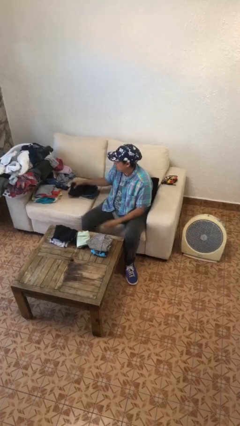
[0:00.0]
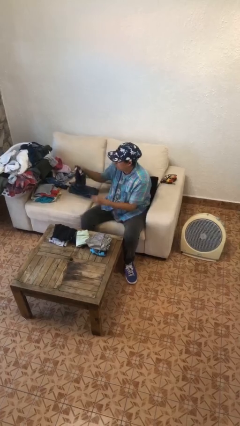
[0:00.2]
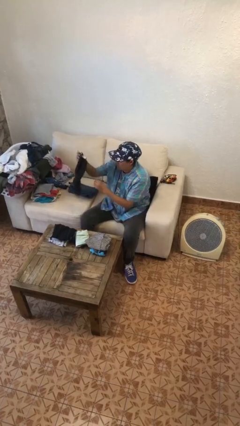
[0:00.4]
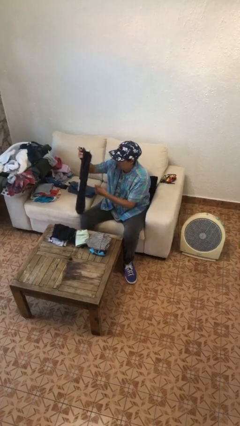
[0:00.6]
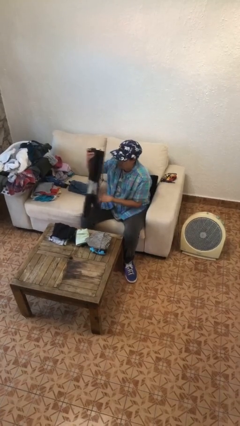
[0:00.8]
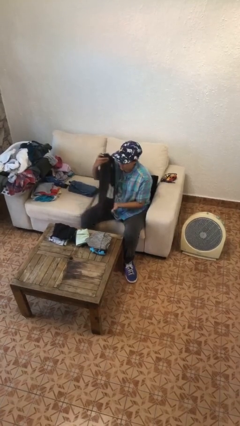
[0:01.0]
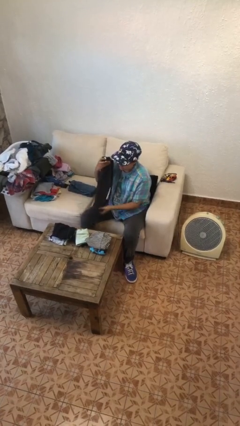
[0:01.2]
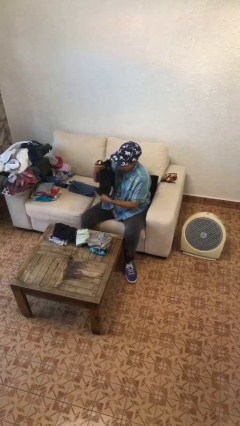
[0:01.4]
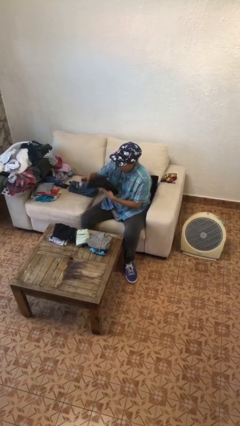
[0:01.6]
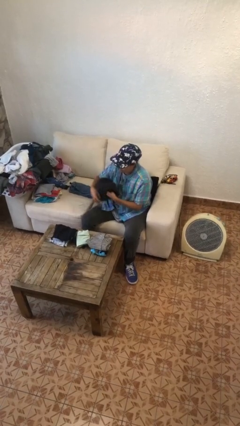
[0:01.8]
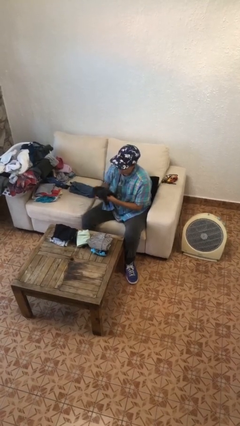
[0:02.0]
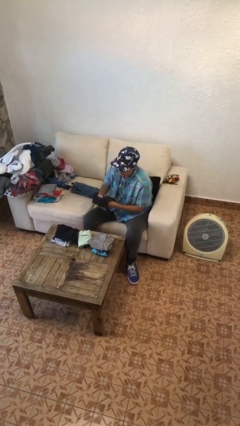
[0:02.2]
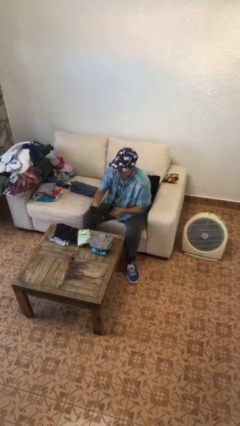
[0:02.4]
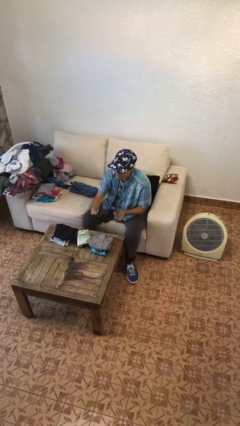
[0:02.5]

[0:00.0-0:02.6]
person folds pants

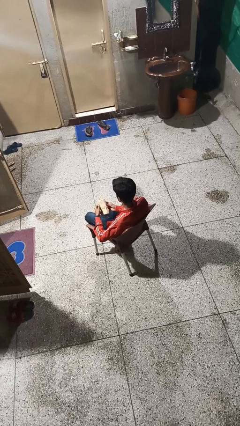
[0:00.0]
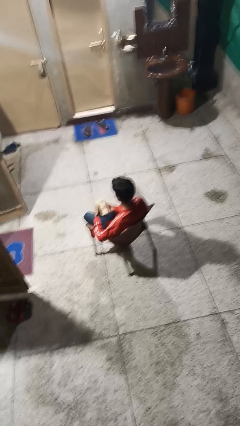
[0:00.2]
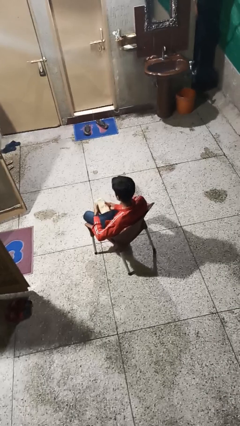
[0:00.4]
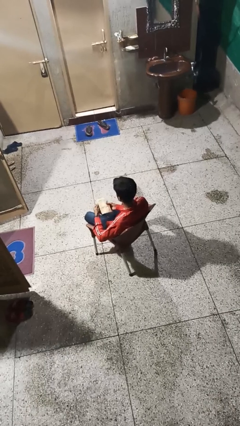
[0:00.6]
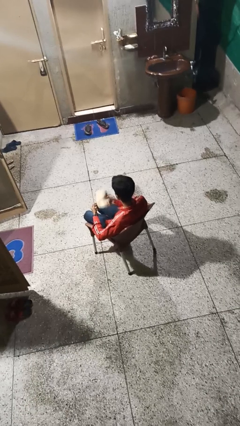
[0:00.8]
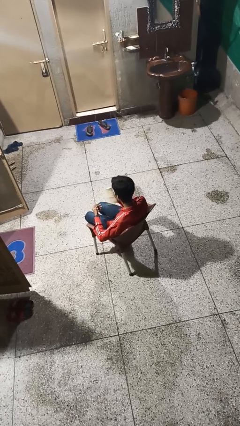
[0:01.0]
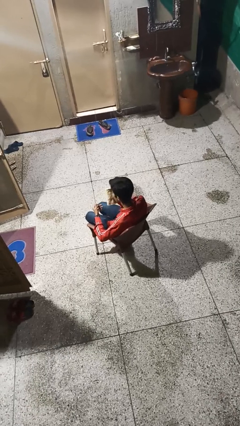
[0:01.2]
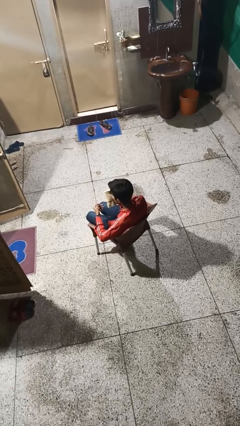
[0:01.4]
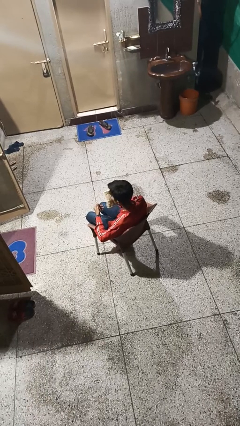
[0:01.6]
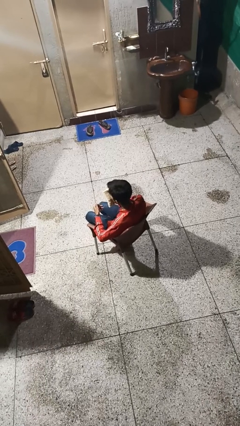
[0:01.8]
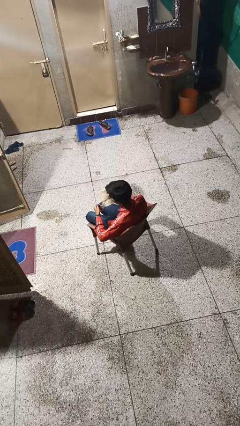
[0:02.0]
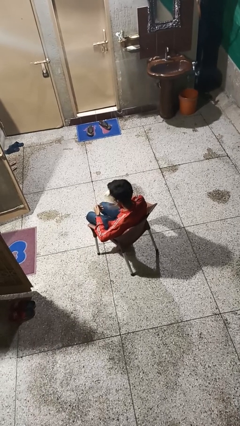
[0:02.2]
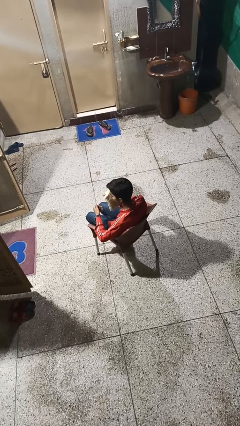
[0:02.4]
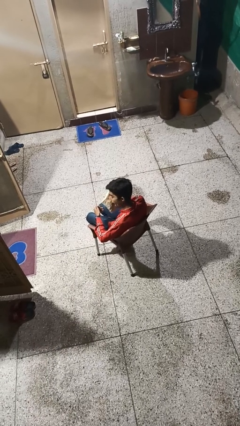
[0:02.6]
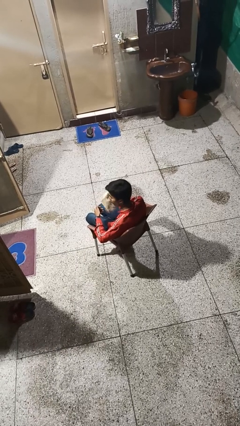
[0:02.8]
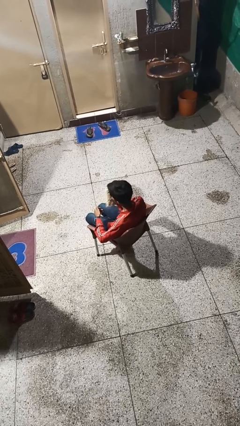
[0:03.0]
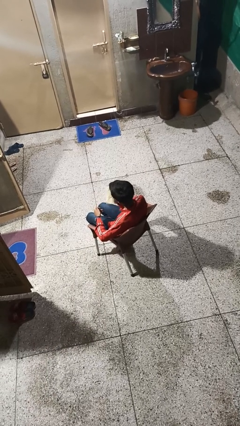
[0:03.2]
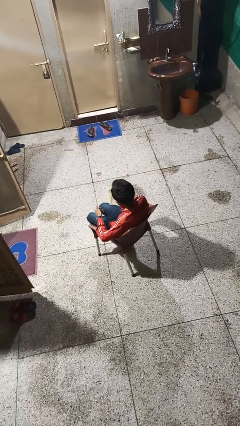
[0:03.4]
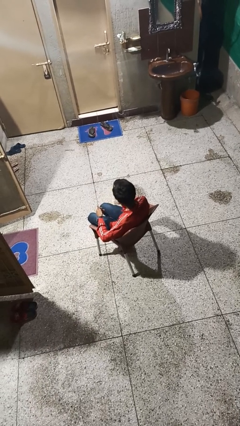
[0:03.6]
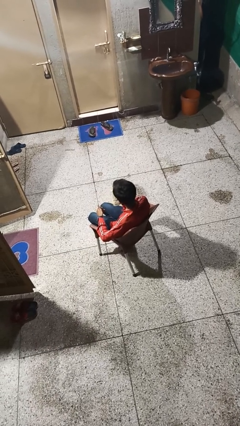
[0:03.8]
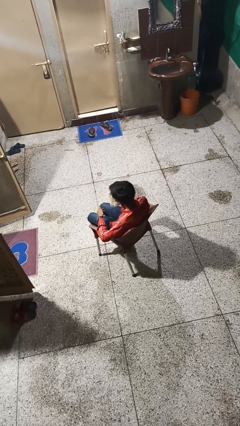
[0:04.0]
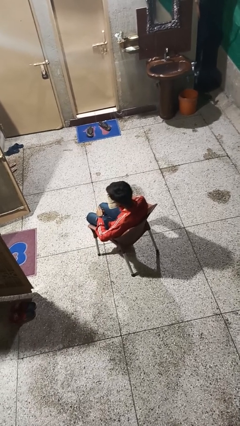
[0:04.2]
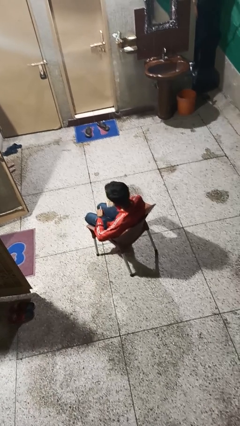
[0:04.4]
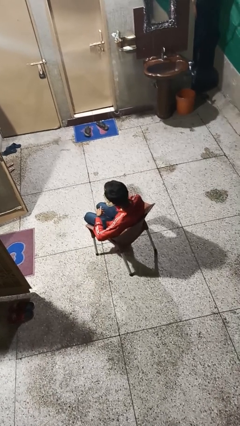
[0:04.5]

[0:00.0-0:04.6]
person blows nose

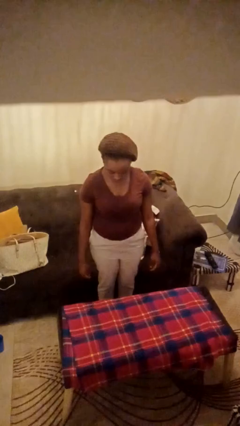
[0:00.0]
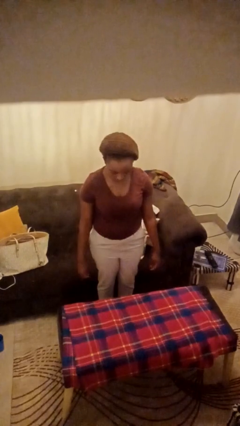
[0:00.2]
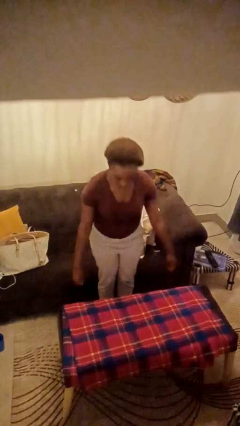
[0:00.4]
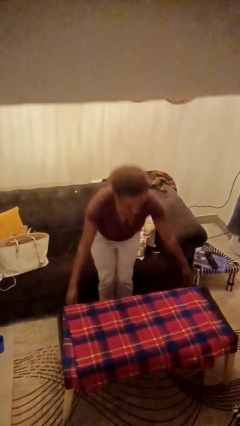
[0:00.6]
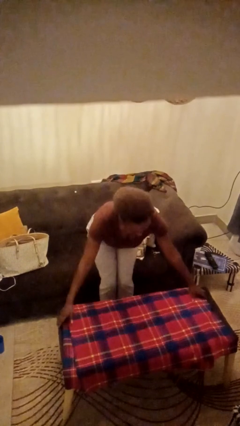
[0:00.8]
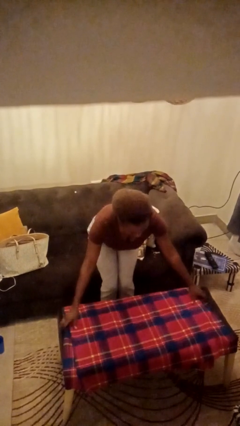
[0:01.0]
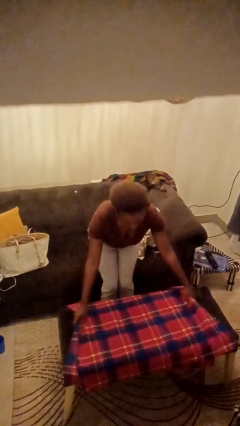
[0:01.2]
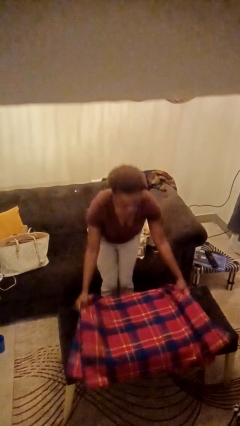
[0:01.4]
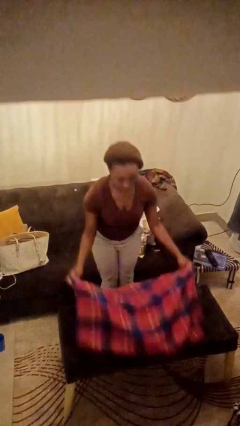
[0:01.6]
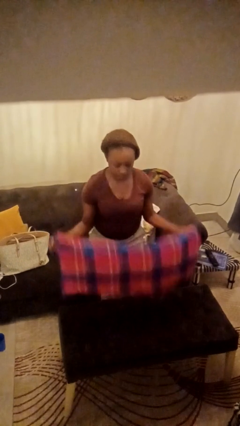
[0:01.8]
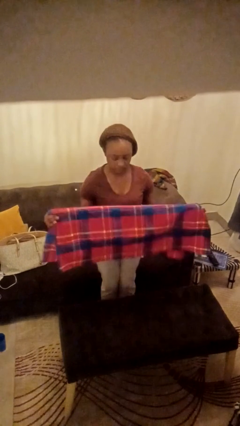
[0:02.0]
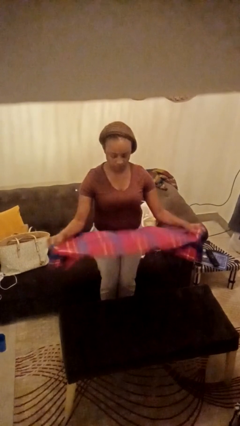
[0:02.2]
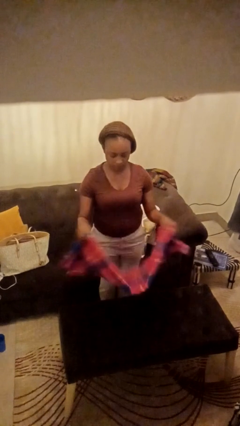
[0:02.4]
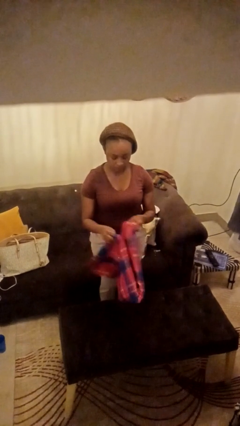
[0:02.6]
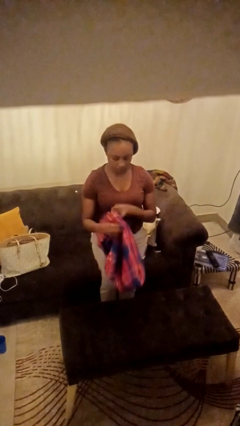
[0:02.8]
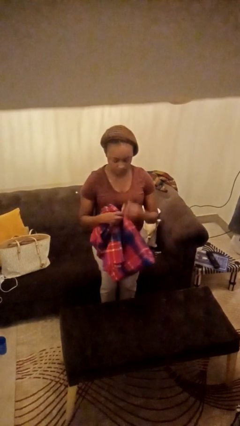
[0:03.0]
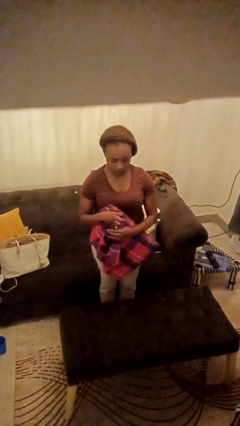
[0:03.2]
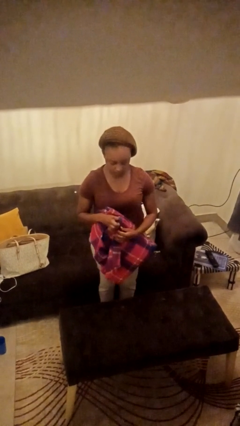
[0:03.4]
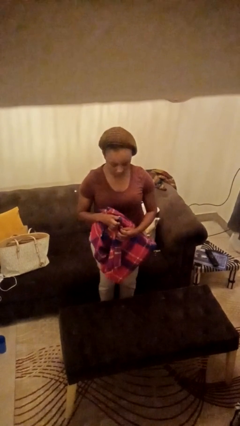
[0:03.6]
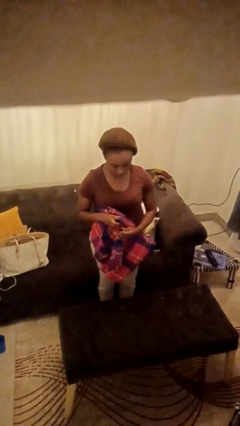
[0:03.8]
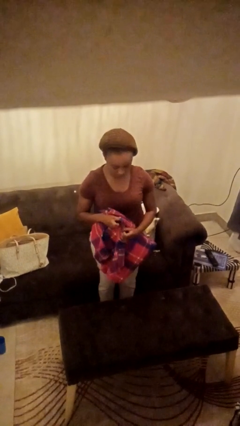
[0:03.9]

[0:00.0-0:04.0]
person folds tablecloth

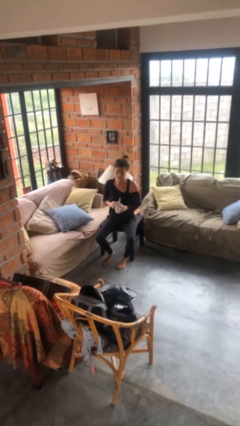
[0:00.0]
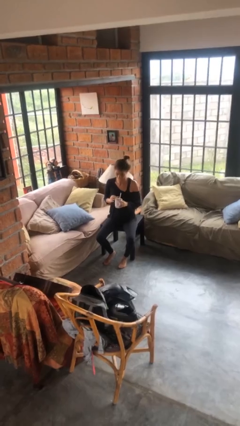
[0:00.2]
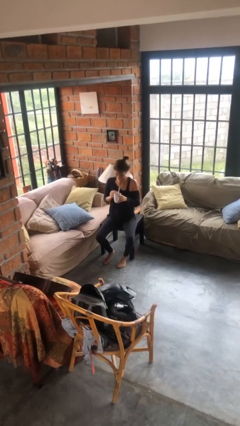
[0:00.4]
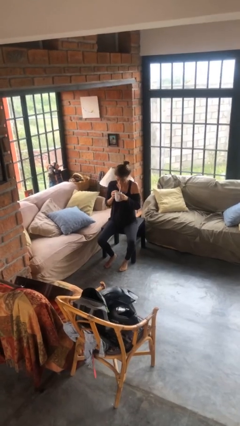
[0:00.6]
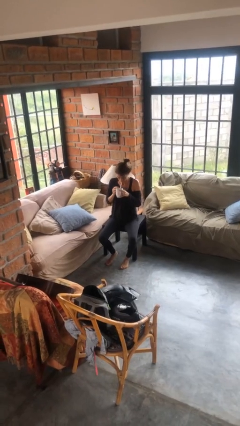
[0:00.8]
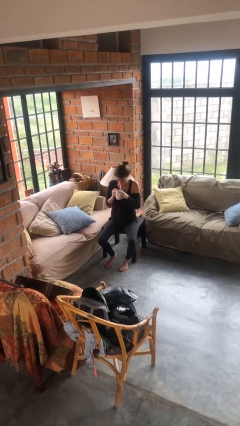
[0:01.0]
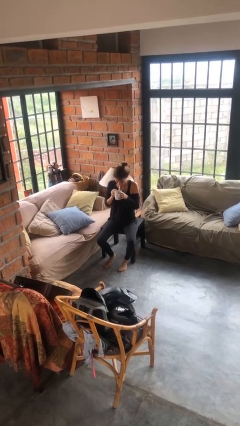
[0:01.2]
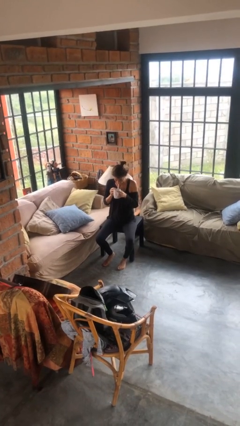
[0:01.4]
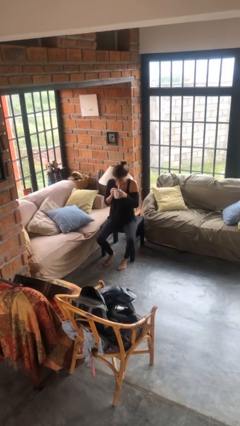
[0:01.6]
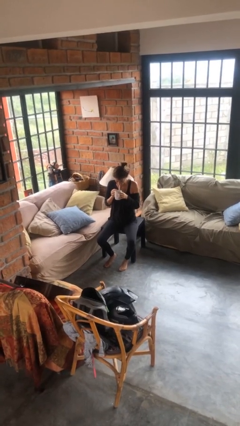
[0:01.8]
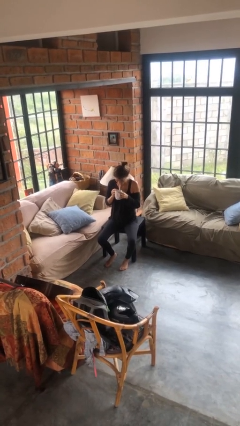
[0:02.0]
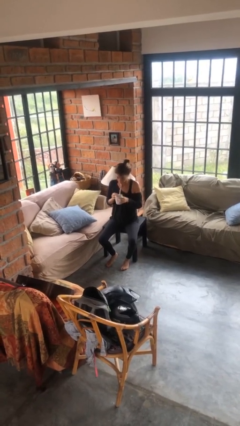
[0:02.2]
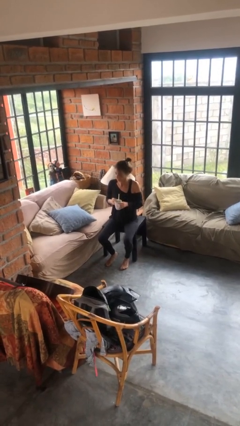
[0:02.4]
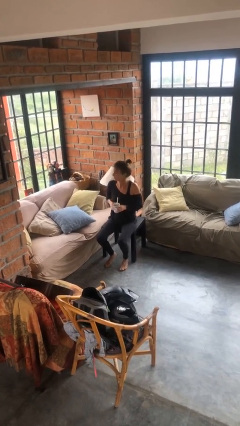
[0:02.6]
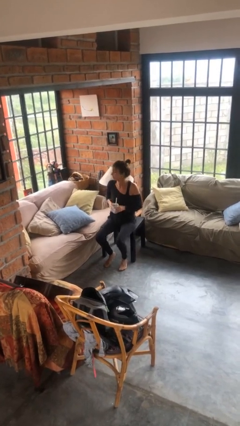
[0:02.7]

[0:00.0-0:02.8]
person drinks from straw

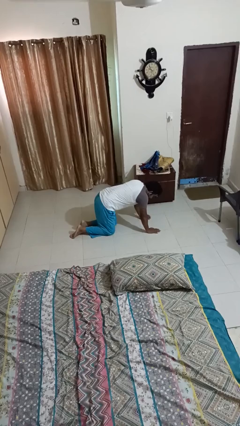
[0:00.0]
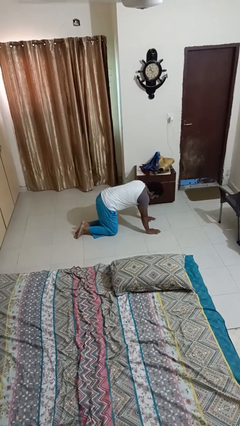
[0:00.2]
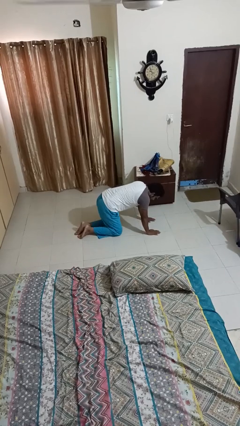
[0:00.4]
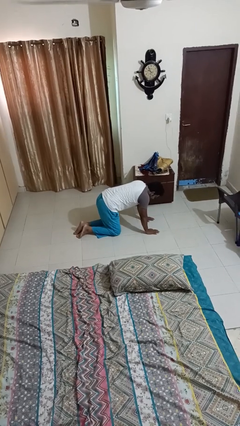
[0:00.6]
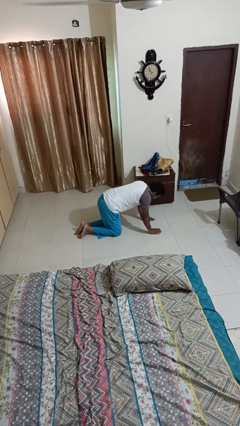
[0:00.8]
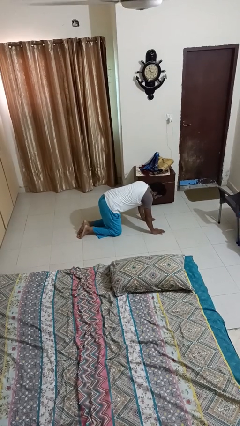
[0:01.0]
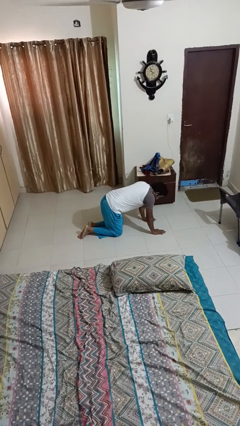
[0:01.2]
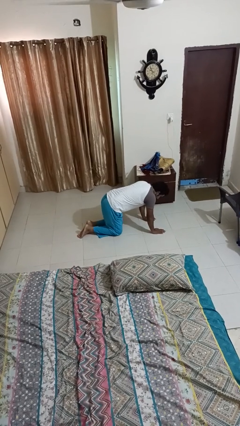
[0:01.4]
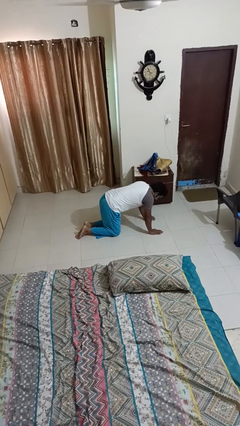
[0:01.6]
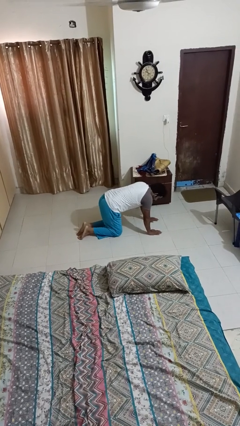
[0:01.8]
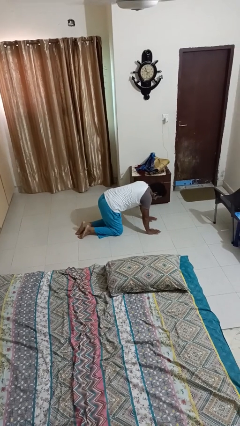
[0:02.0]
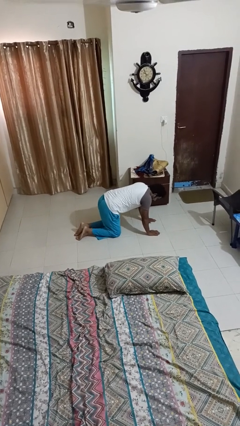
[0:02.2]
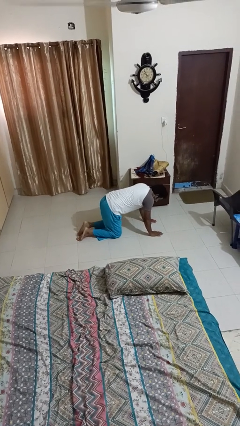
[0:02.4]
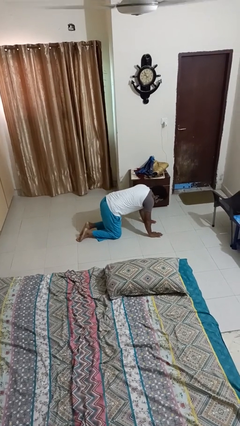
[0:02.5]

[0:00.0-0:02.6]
person crawls

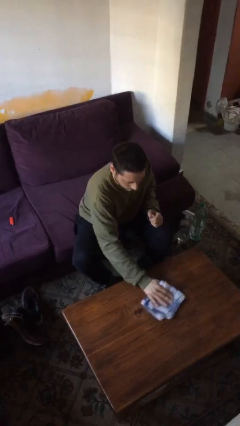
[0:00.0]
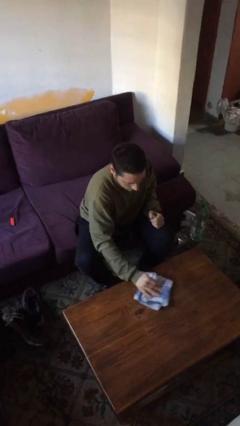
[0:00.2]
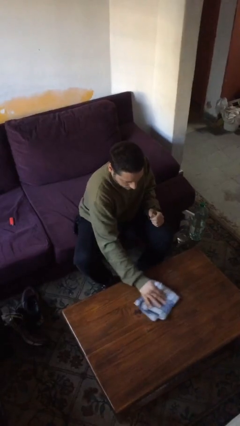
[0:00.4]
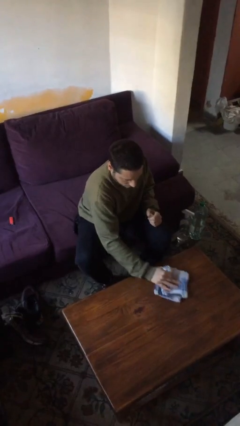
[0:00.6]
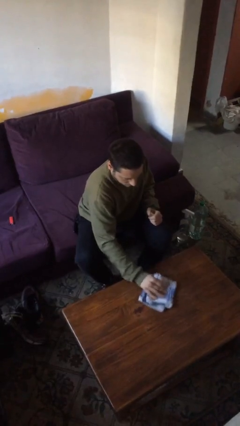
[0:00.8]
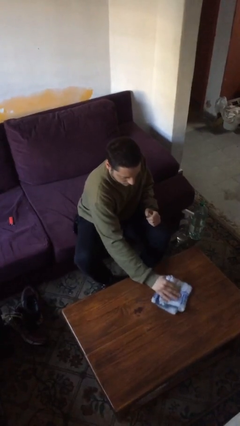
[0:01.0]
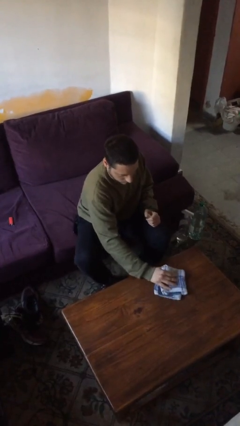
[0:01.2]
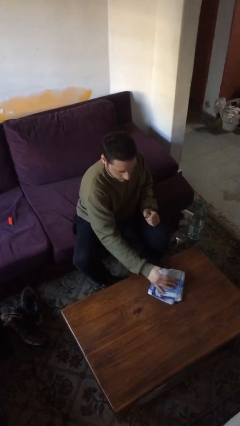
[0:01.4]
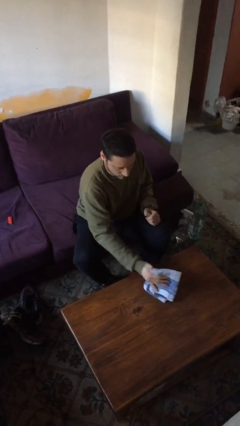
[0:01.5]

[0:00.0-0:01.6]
person cleans table with rag
